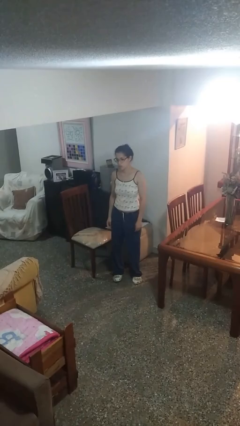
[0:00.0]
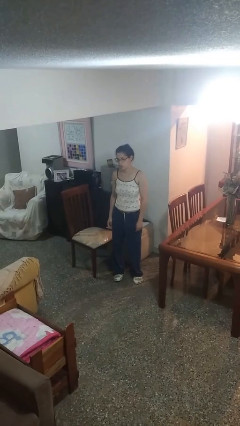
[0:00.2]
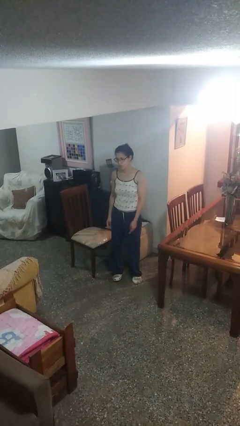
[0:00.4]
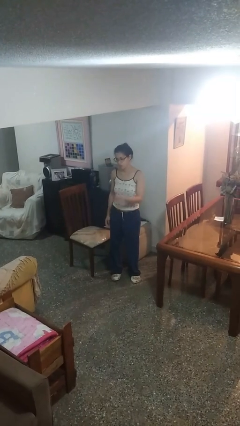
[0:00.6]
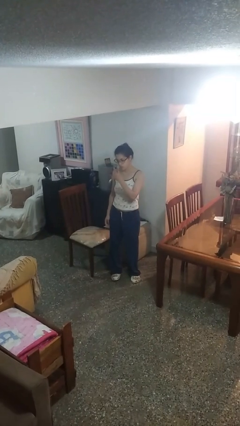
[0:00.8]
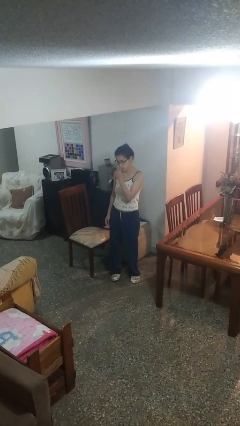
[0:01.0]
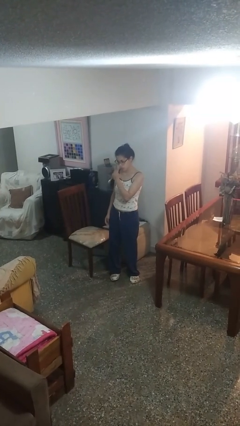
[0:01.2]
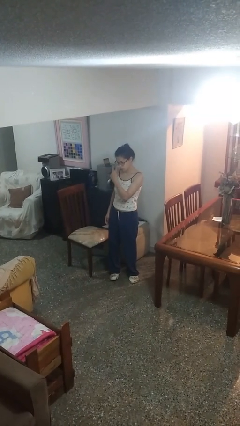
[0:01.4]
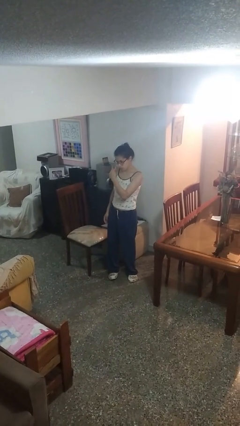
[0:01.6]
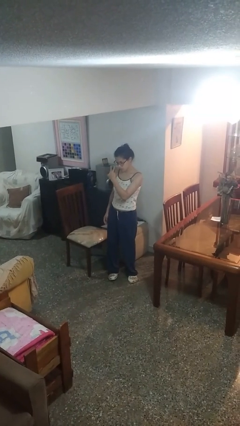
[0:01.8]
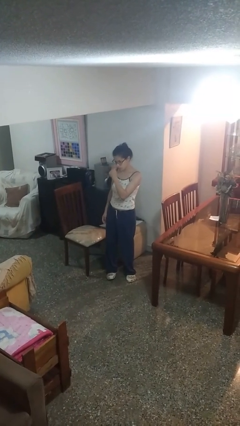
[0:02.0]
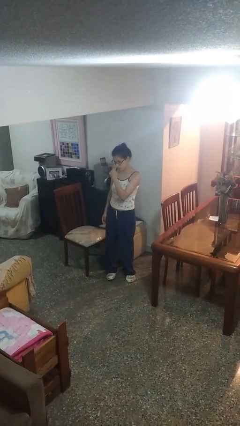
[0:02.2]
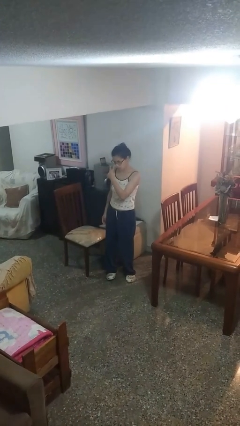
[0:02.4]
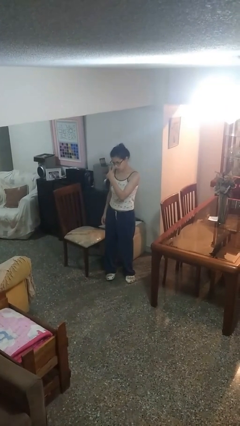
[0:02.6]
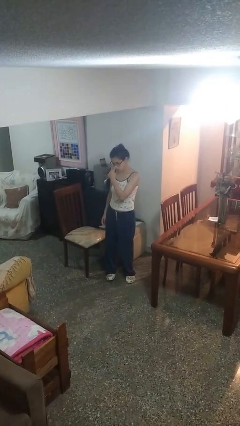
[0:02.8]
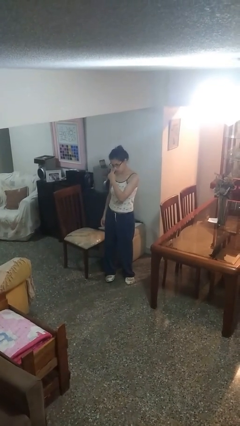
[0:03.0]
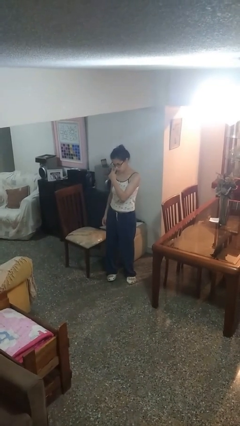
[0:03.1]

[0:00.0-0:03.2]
person gestures watch closely

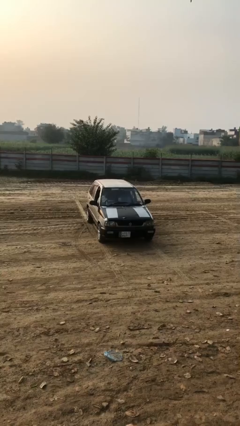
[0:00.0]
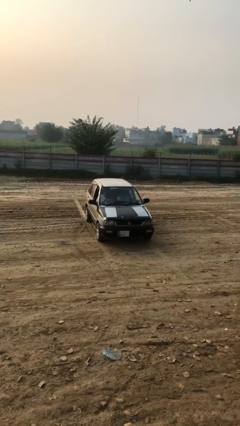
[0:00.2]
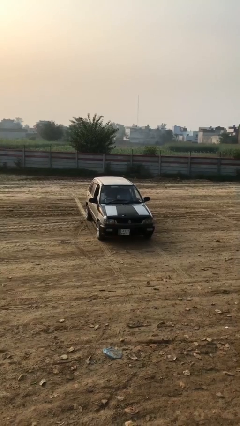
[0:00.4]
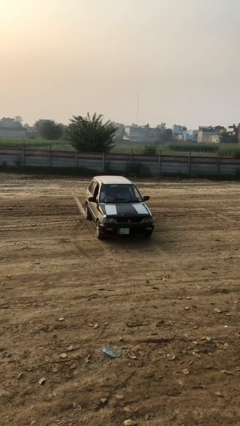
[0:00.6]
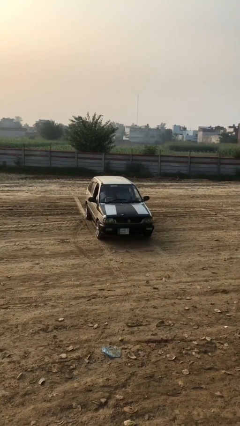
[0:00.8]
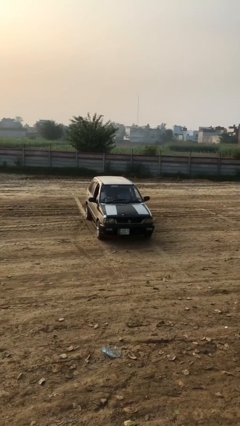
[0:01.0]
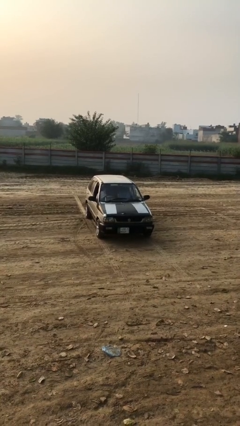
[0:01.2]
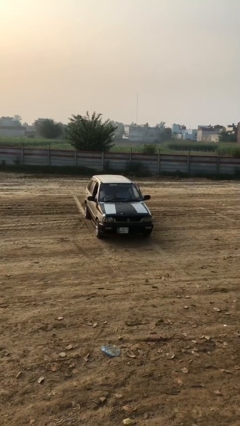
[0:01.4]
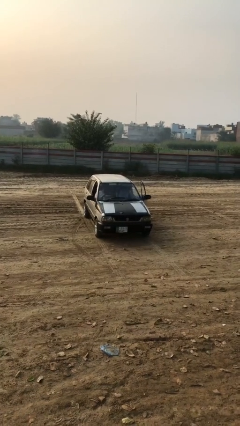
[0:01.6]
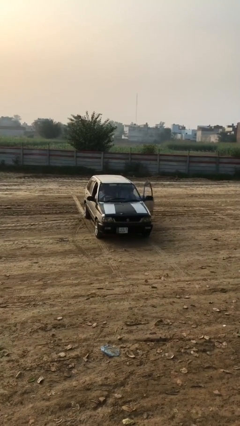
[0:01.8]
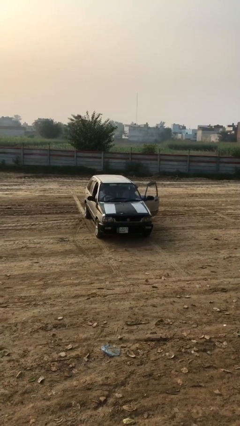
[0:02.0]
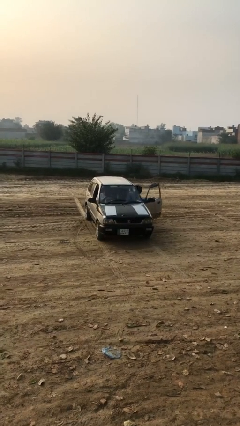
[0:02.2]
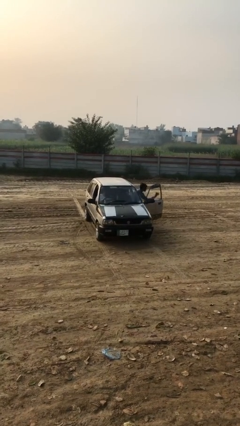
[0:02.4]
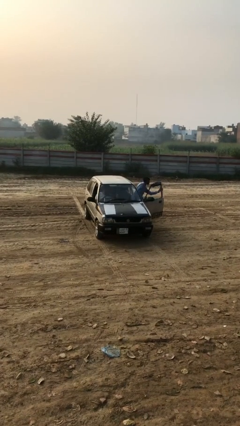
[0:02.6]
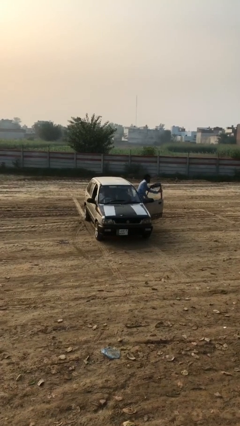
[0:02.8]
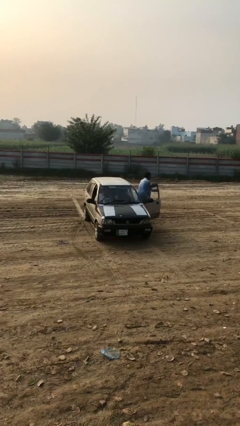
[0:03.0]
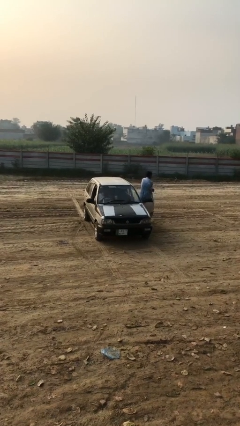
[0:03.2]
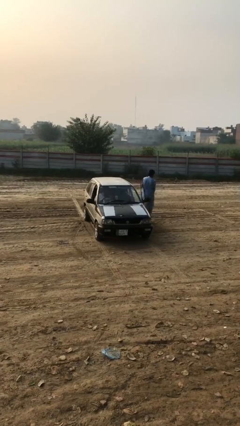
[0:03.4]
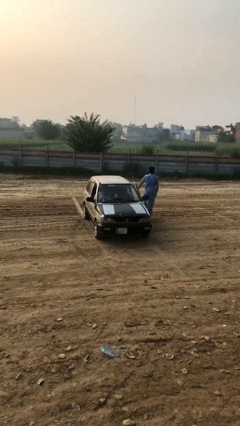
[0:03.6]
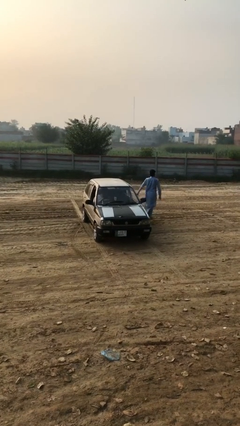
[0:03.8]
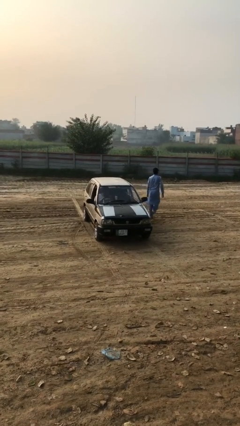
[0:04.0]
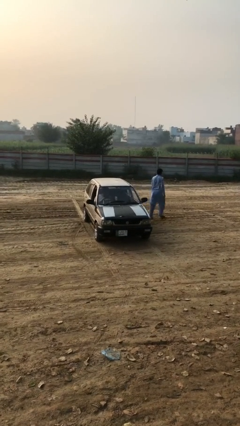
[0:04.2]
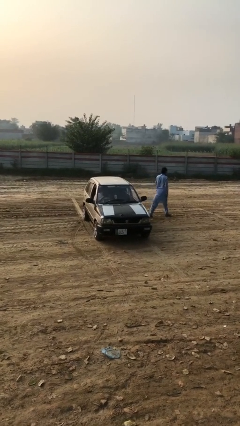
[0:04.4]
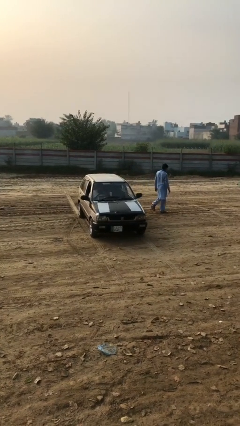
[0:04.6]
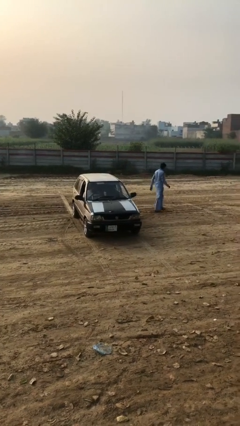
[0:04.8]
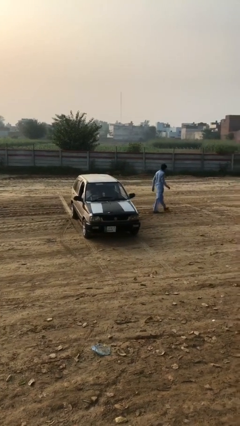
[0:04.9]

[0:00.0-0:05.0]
car drops off person

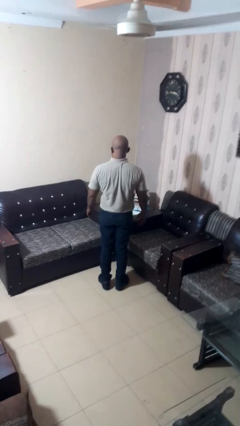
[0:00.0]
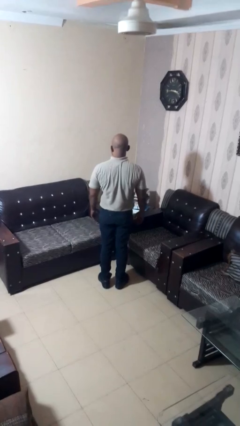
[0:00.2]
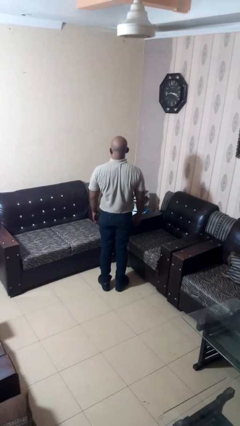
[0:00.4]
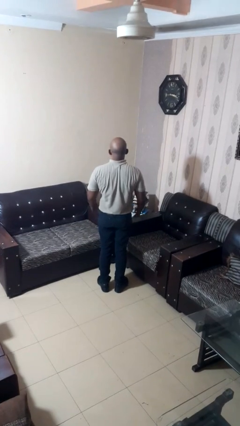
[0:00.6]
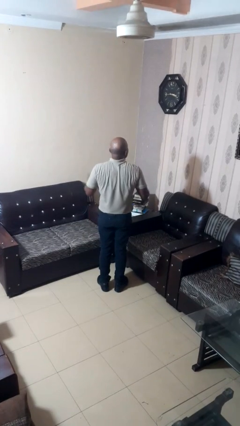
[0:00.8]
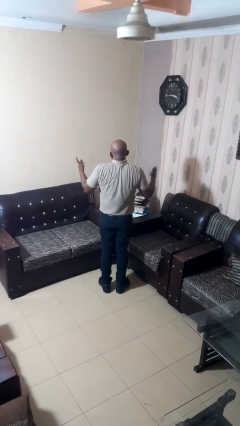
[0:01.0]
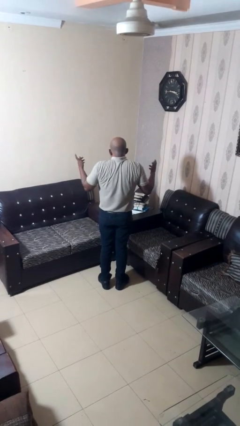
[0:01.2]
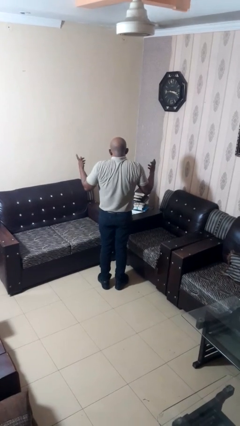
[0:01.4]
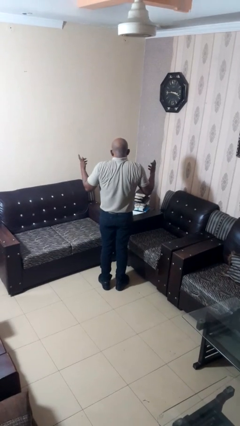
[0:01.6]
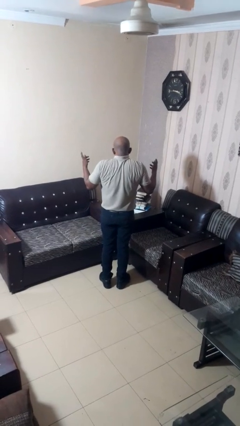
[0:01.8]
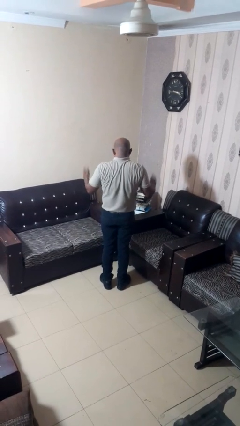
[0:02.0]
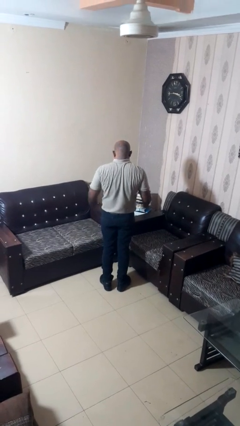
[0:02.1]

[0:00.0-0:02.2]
person shrugs

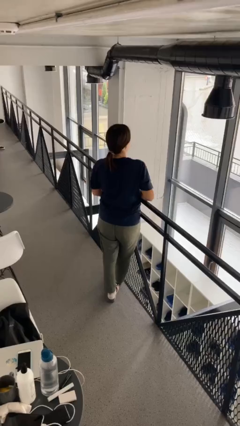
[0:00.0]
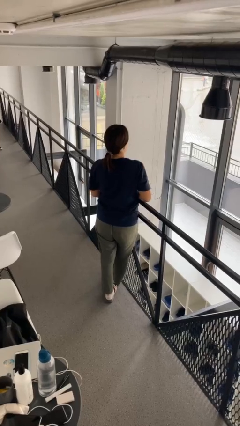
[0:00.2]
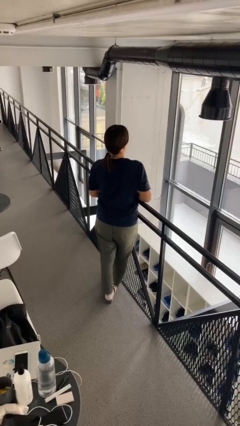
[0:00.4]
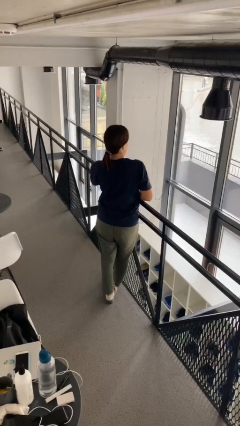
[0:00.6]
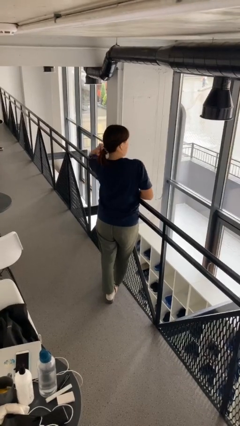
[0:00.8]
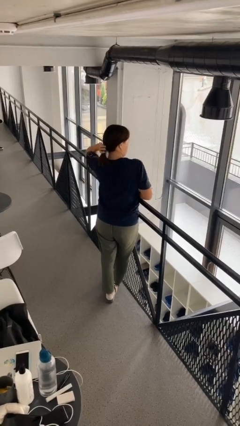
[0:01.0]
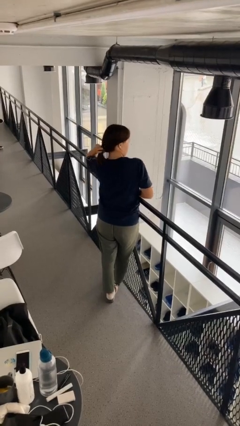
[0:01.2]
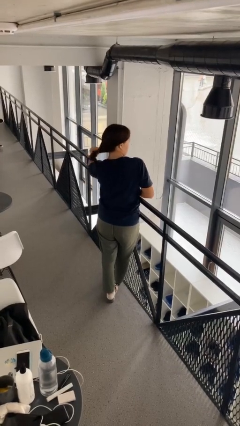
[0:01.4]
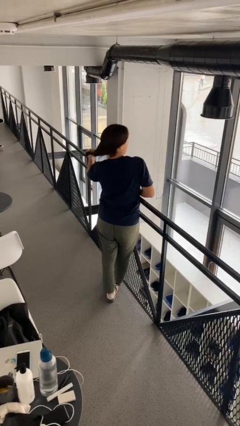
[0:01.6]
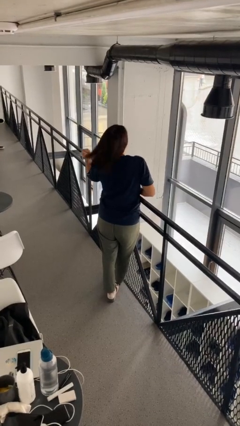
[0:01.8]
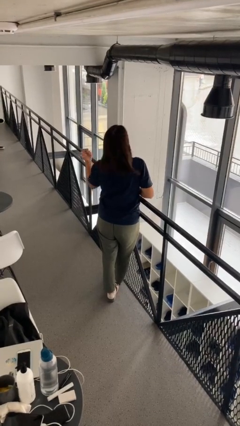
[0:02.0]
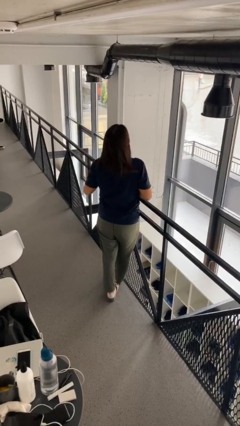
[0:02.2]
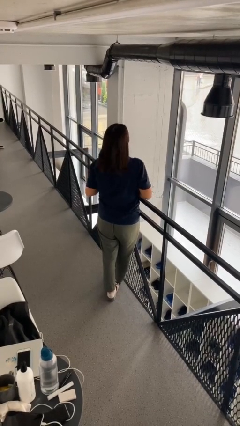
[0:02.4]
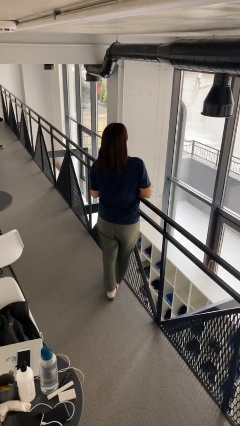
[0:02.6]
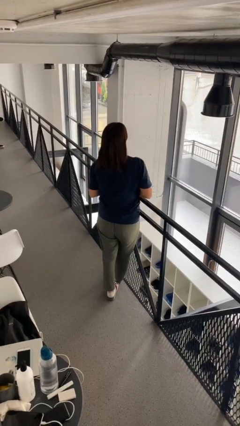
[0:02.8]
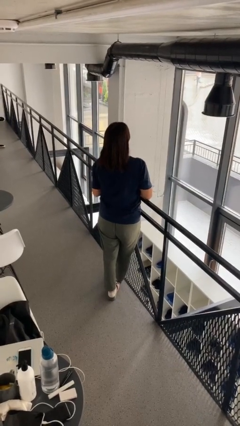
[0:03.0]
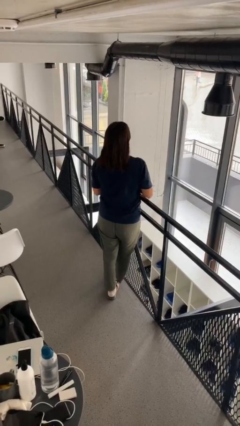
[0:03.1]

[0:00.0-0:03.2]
person takes off hairtie

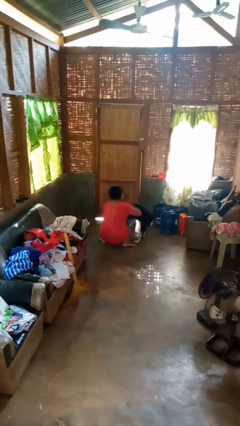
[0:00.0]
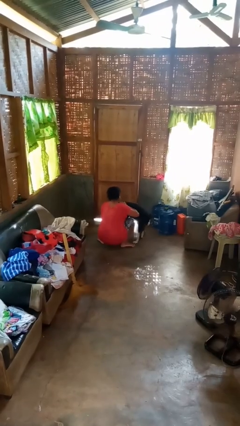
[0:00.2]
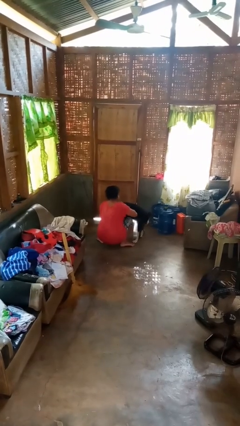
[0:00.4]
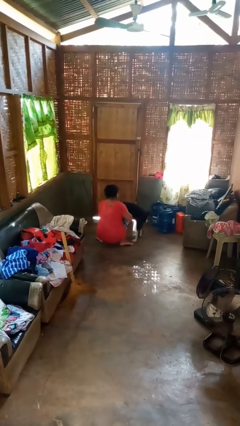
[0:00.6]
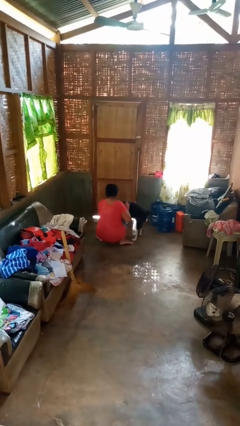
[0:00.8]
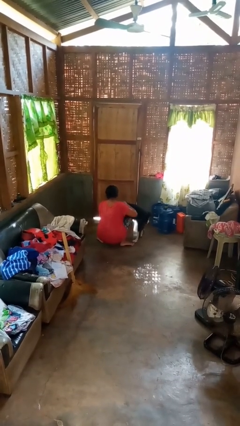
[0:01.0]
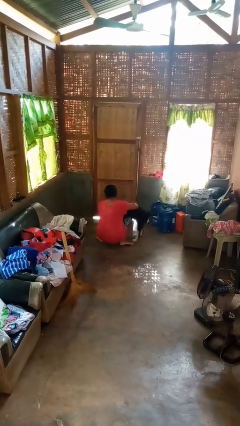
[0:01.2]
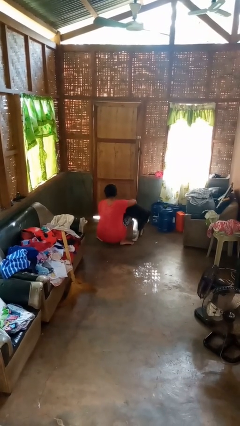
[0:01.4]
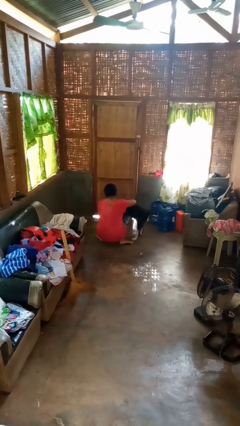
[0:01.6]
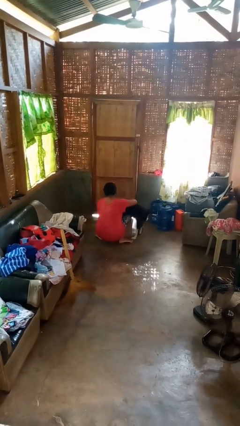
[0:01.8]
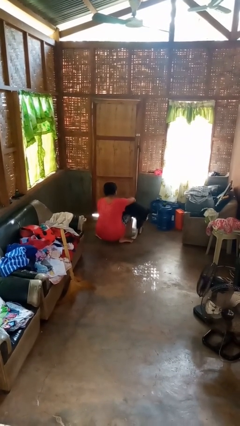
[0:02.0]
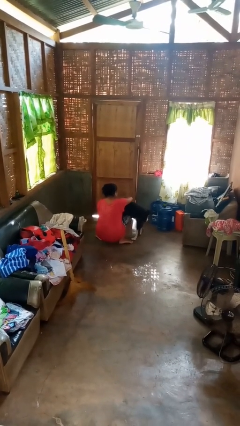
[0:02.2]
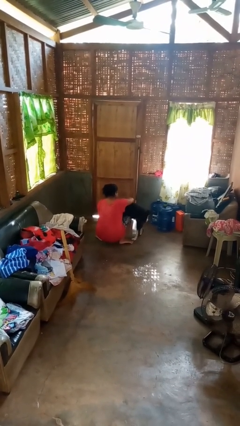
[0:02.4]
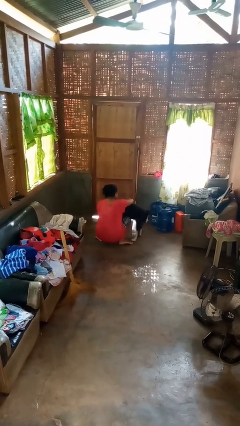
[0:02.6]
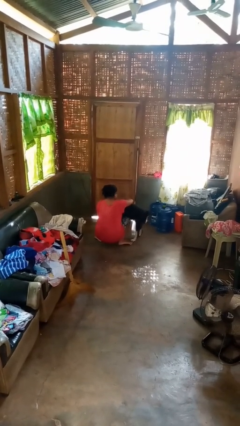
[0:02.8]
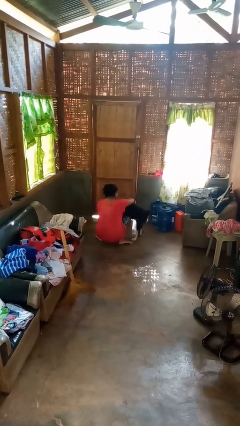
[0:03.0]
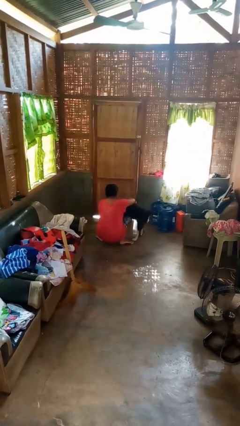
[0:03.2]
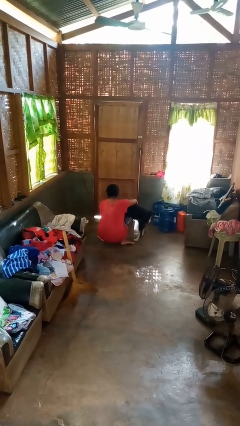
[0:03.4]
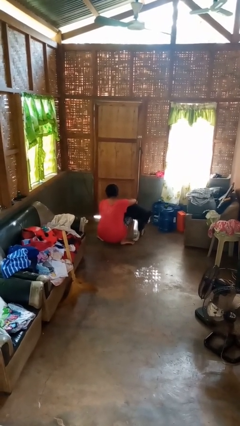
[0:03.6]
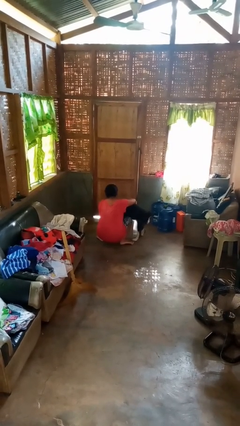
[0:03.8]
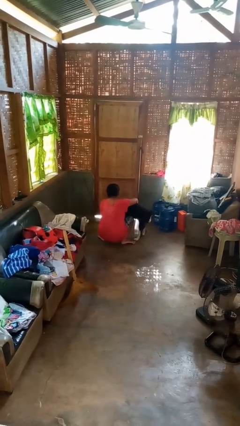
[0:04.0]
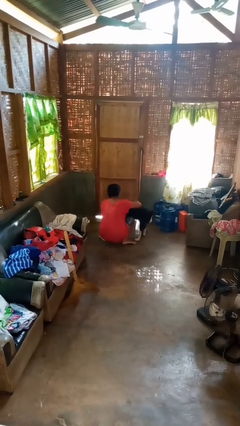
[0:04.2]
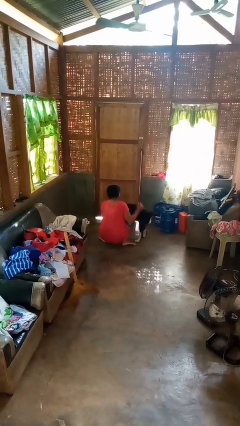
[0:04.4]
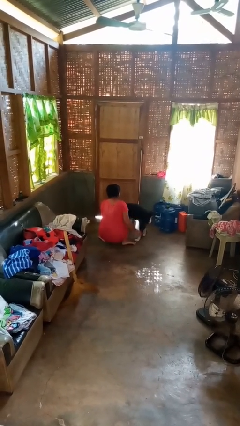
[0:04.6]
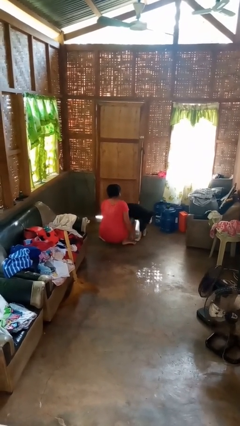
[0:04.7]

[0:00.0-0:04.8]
person hugs dog
